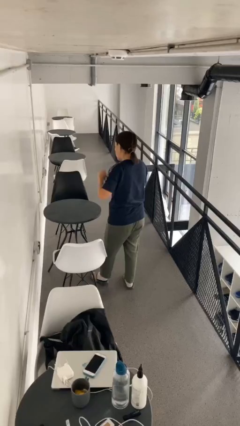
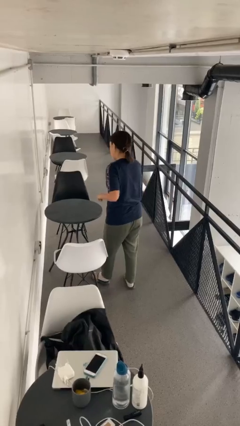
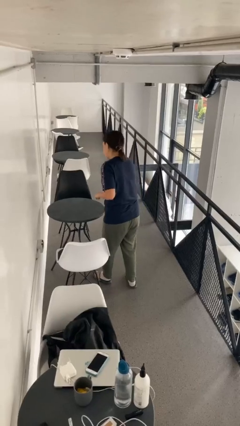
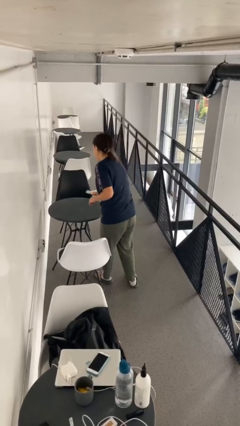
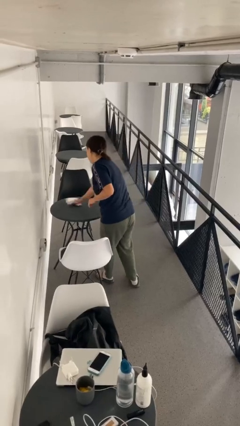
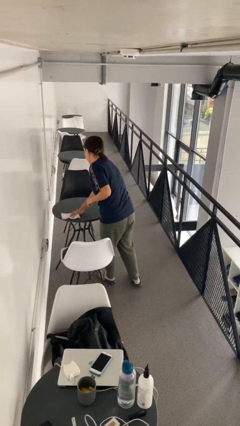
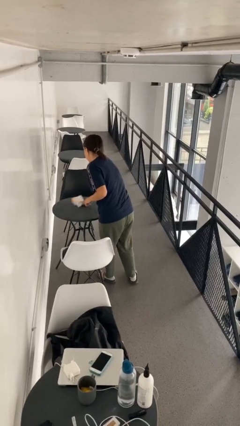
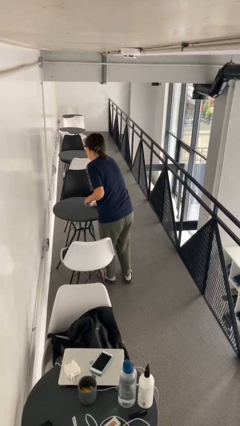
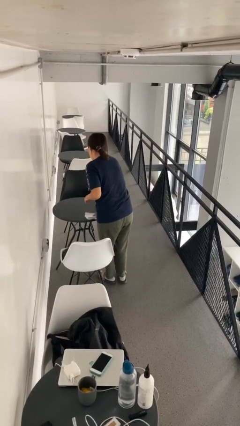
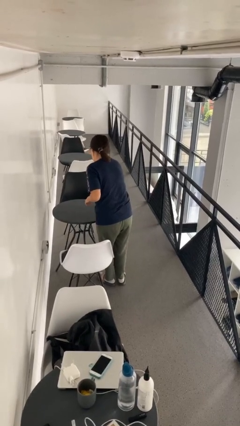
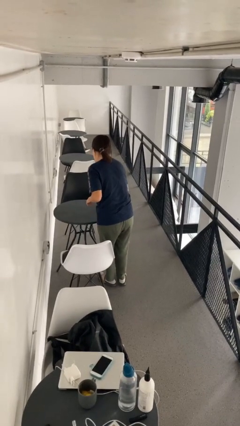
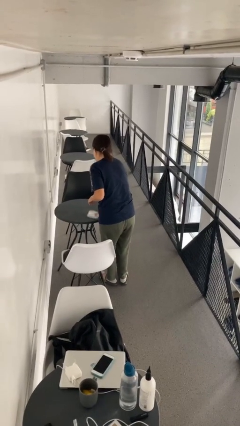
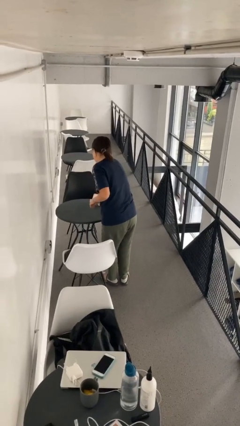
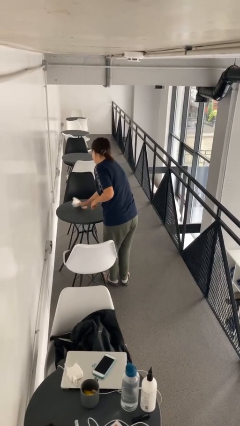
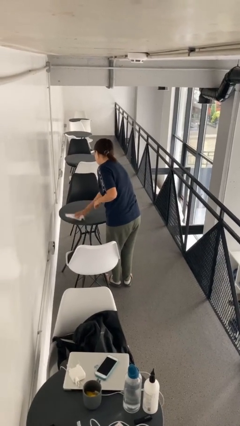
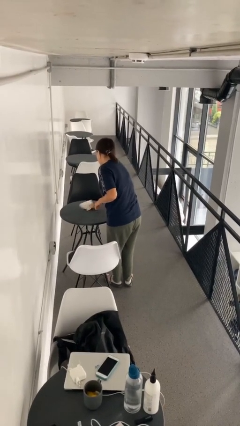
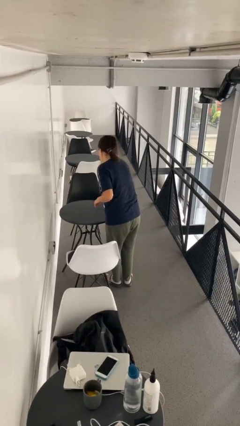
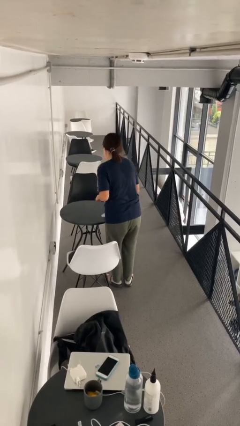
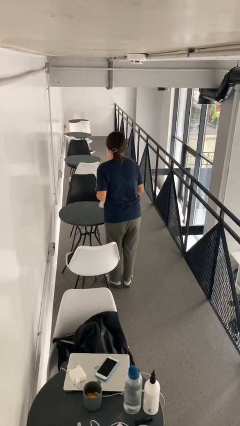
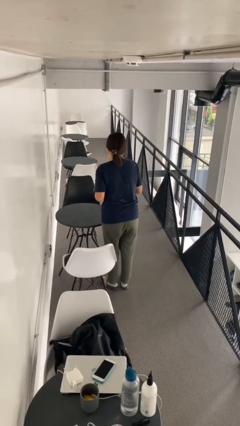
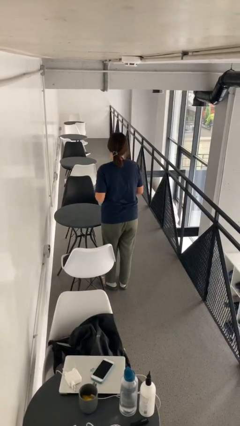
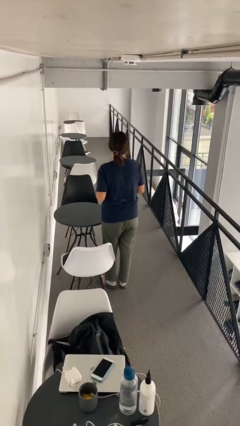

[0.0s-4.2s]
person cleans table with rag

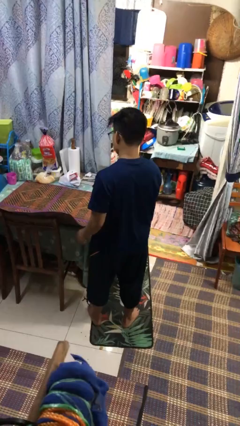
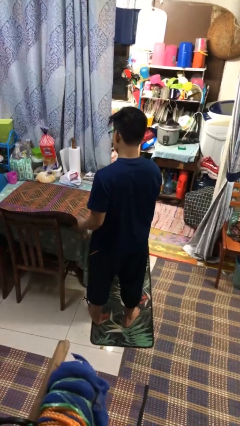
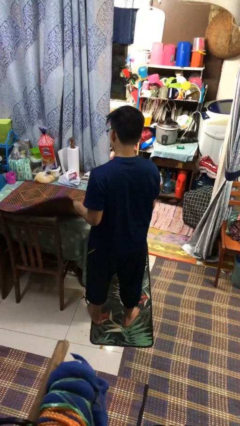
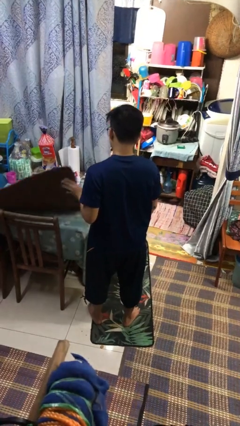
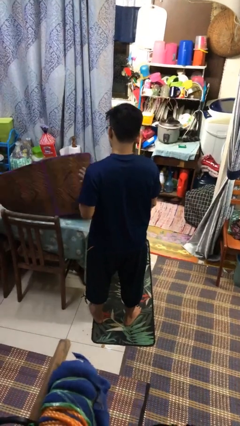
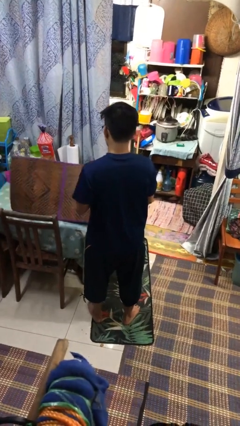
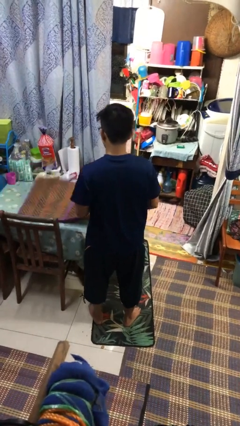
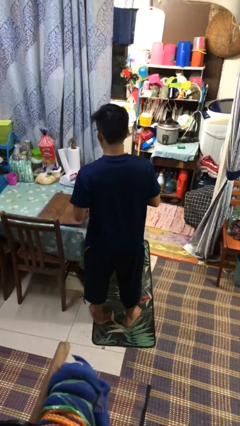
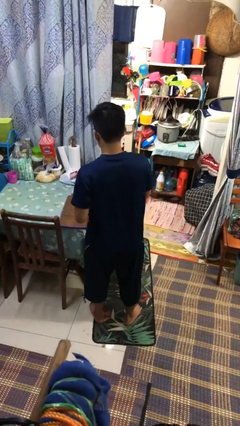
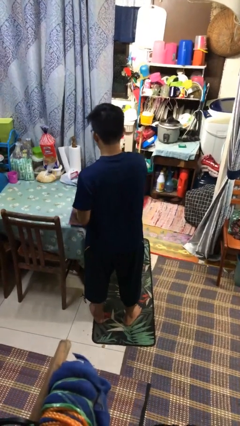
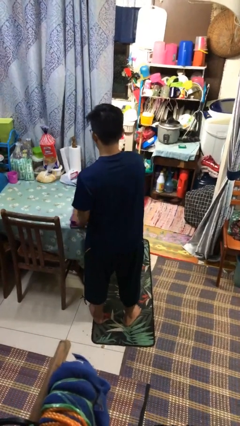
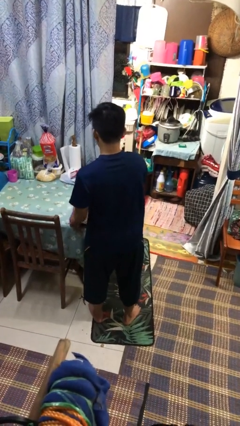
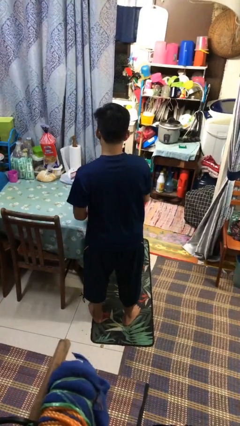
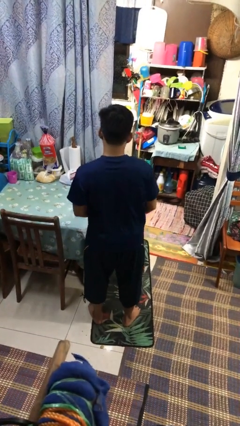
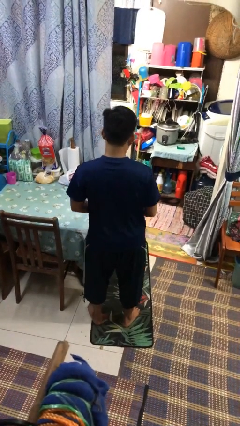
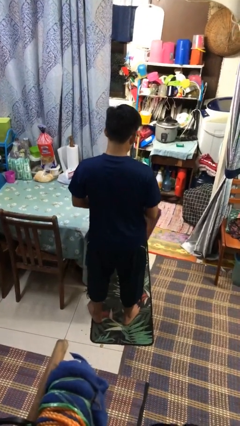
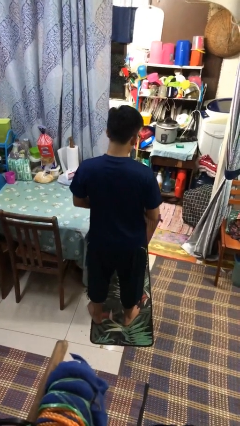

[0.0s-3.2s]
person folds tablecloth

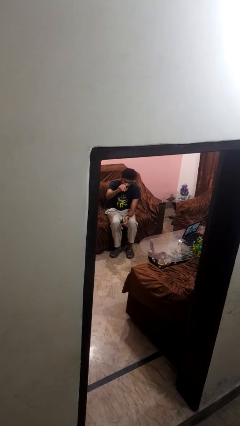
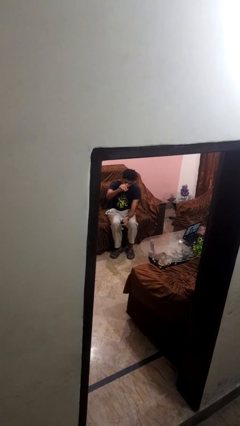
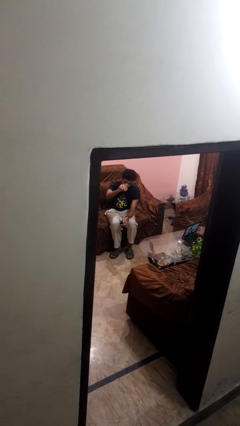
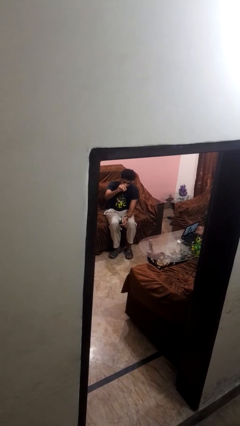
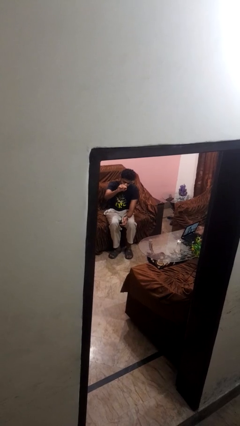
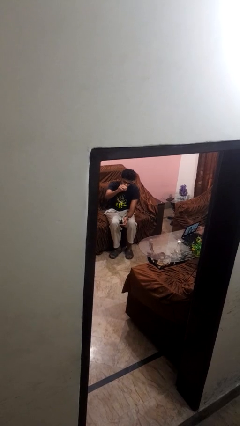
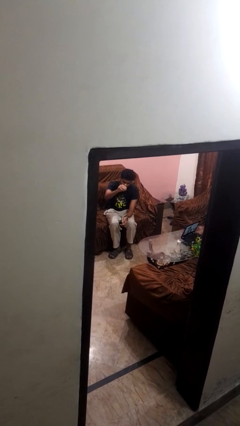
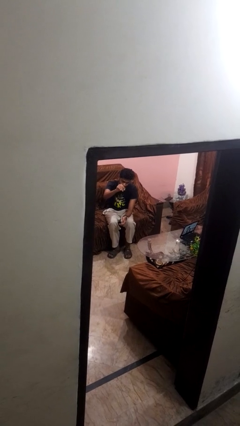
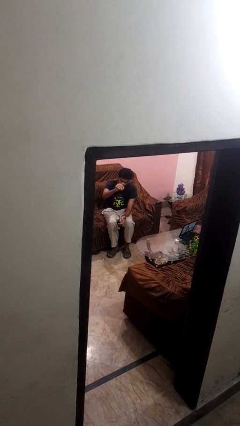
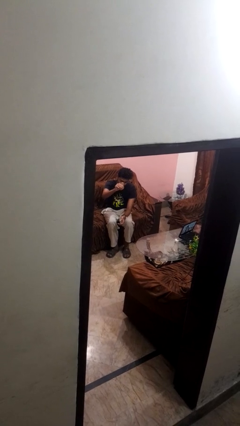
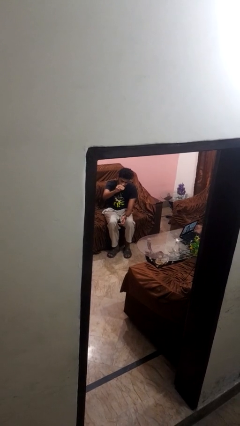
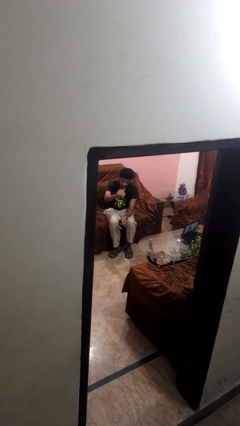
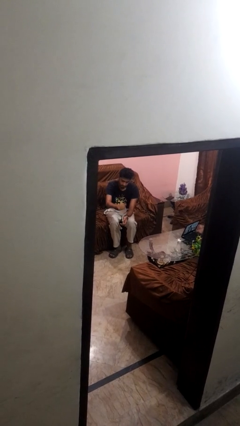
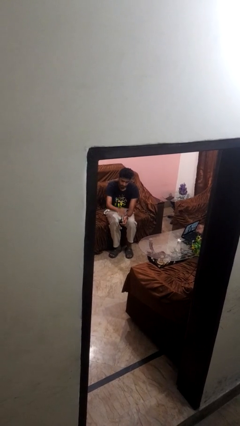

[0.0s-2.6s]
person gestures come here

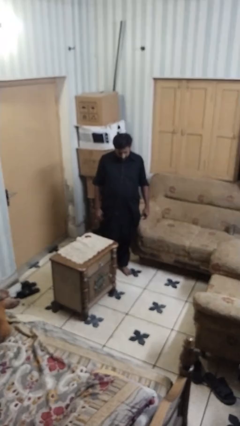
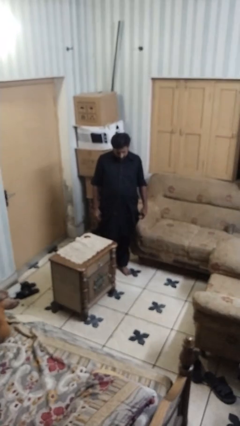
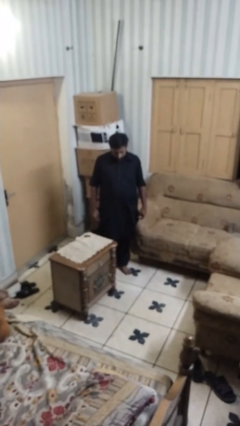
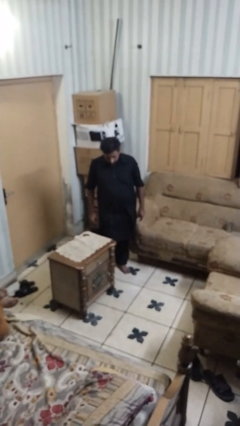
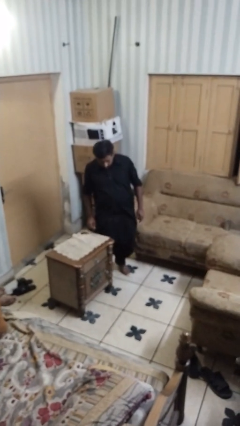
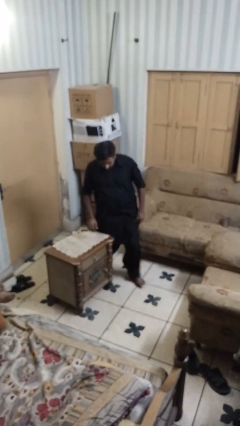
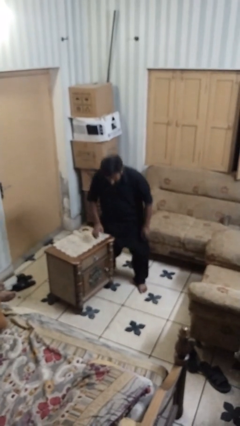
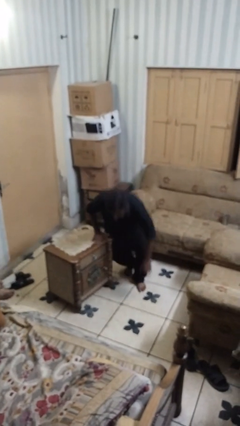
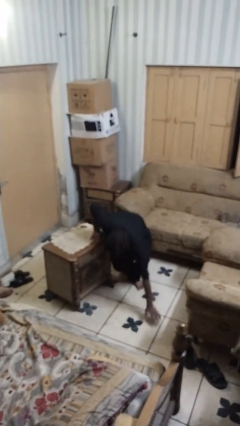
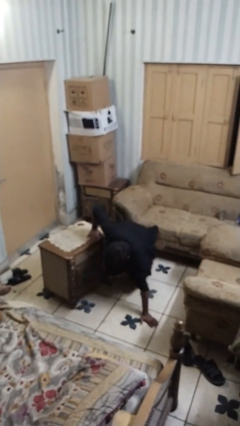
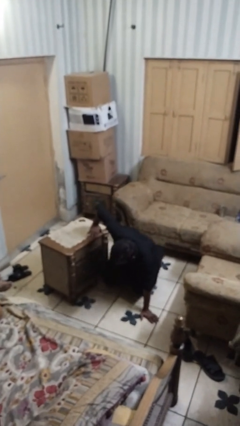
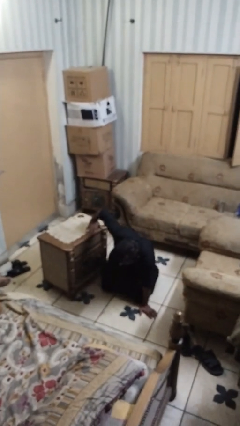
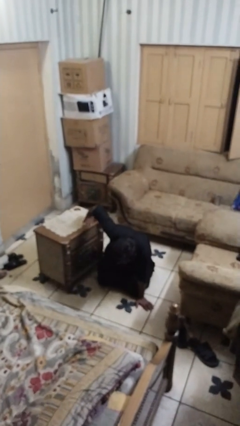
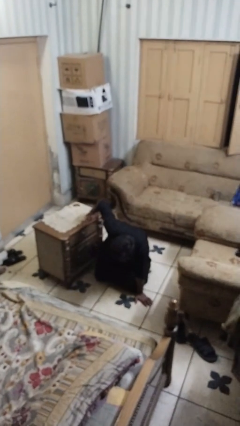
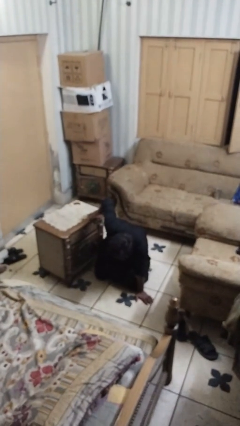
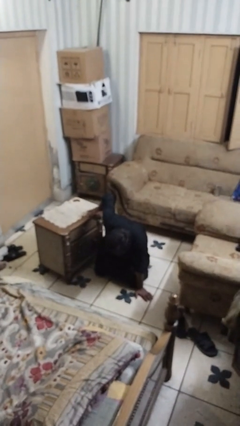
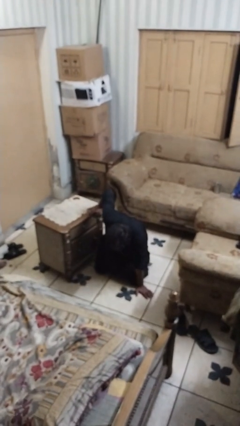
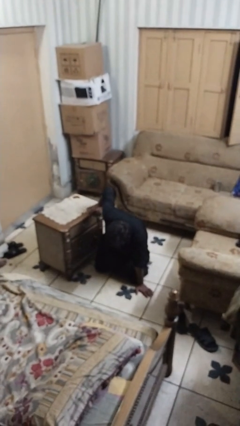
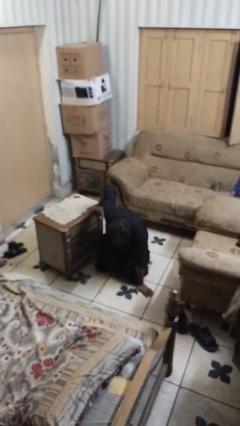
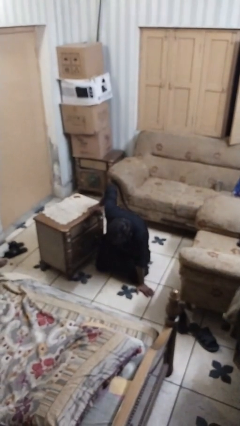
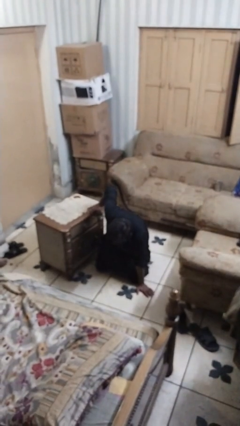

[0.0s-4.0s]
person bumps into table

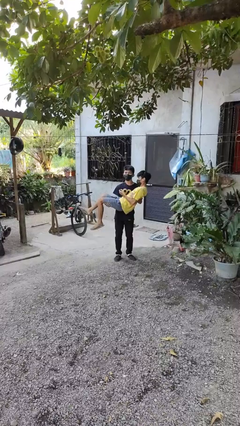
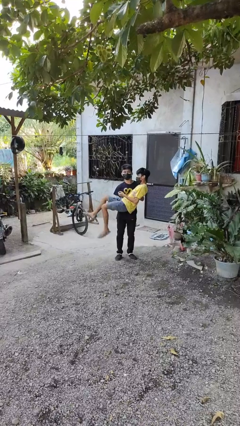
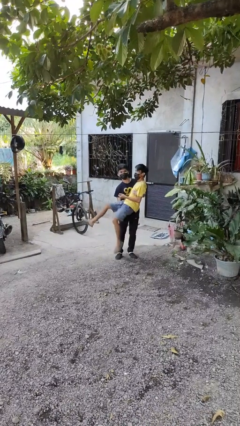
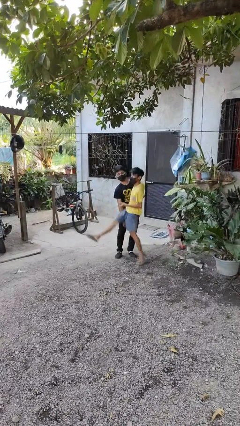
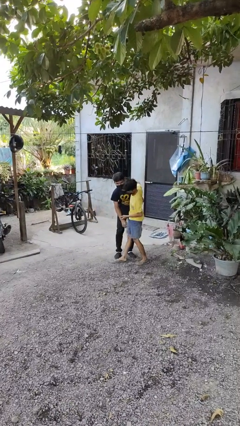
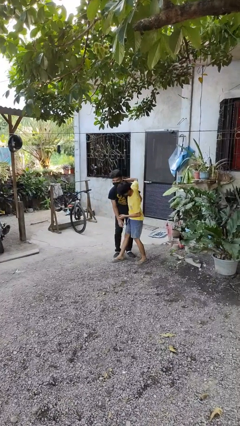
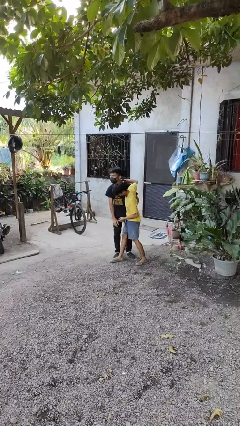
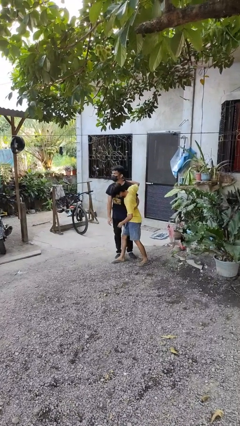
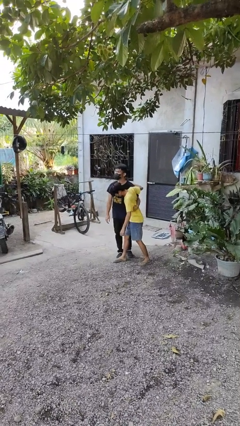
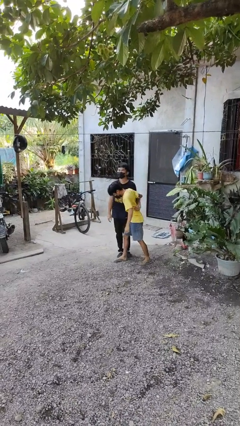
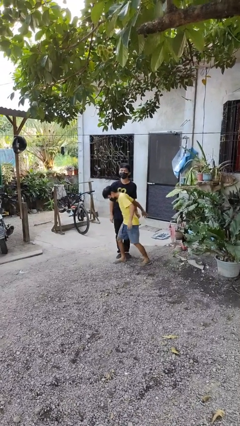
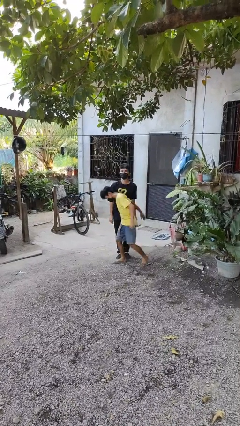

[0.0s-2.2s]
person puts down person

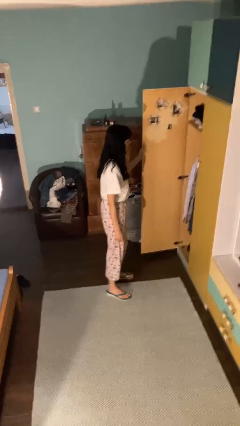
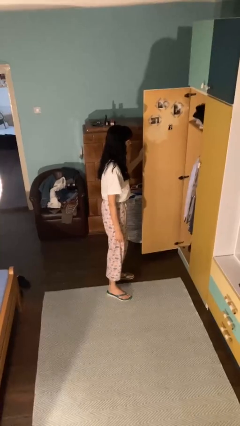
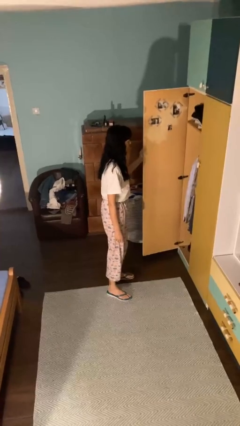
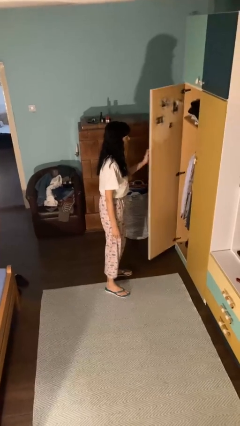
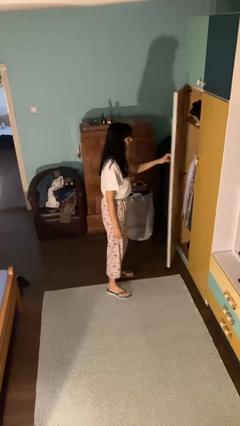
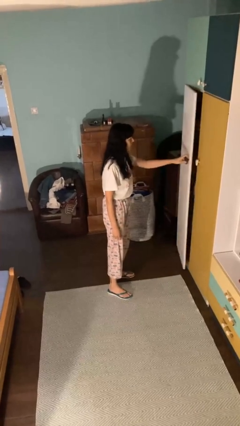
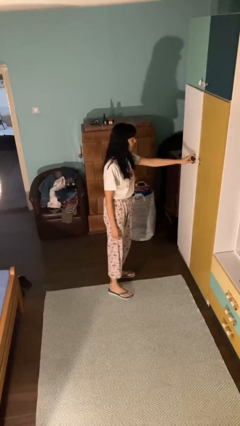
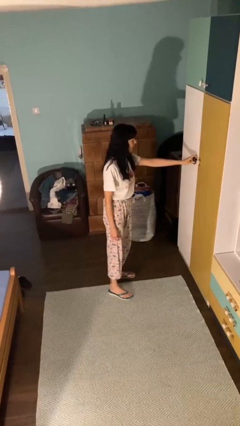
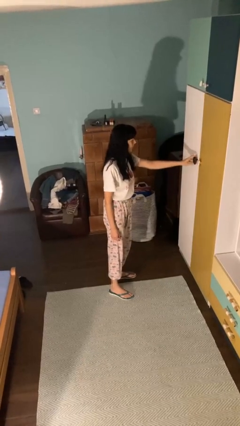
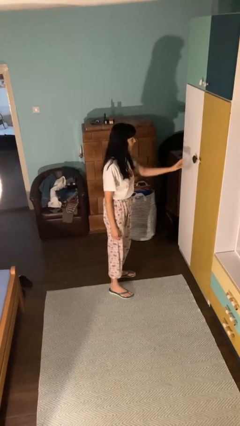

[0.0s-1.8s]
person closes closet door
